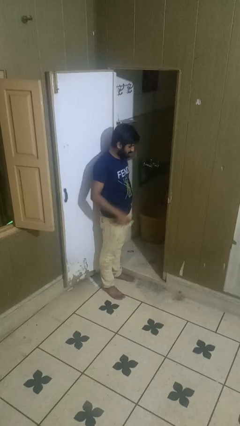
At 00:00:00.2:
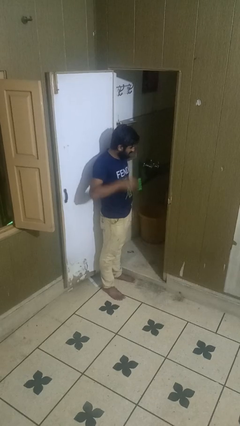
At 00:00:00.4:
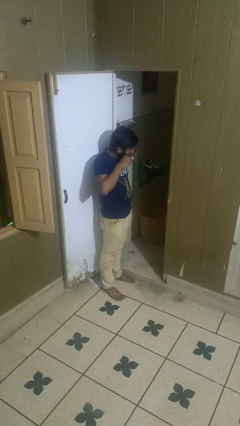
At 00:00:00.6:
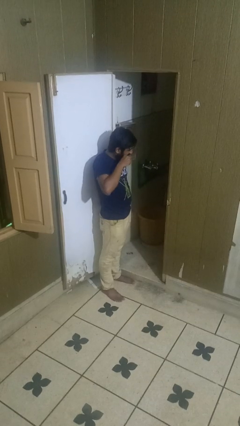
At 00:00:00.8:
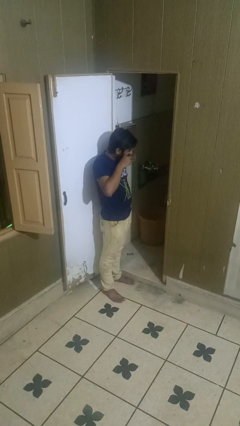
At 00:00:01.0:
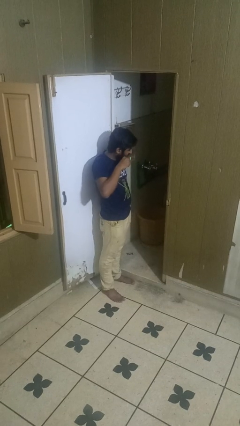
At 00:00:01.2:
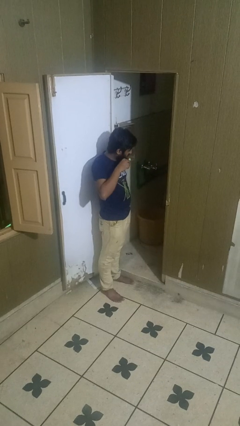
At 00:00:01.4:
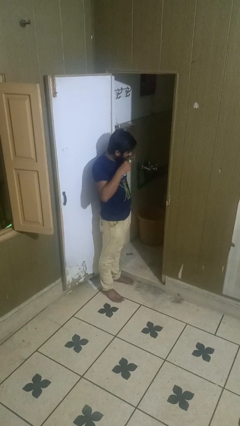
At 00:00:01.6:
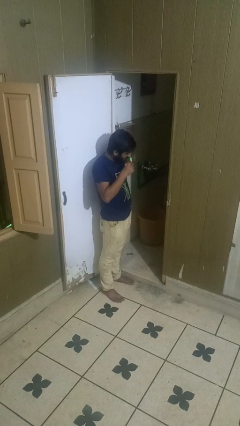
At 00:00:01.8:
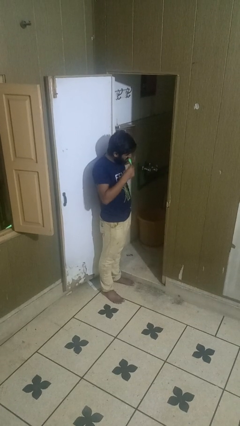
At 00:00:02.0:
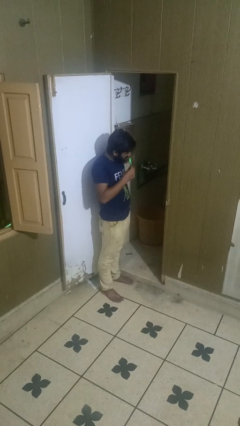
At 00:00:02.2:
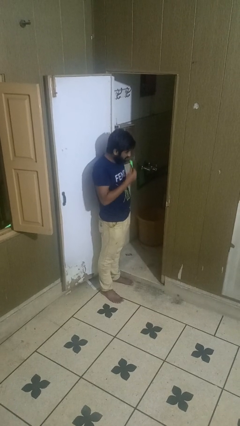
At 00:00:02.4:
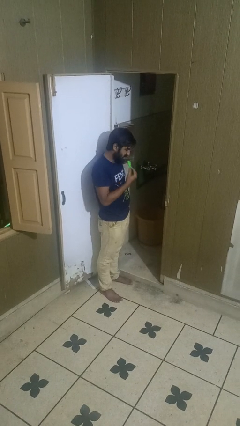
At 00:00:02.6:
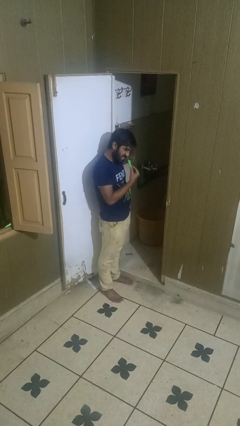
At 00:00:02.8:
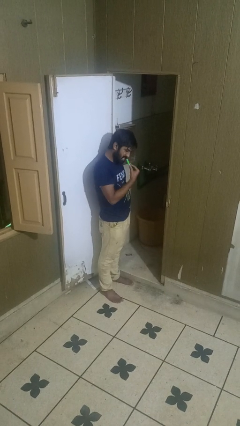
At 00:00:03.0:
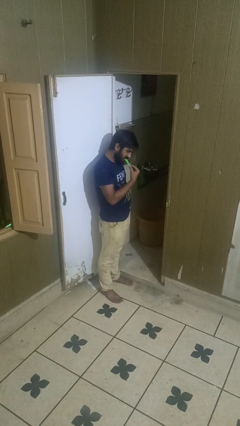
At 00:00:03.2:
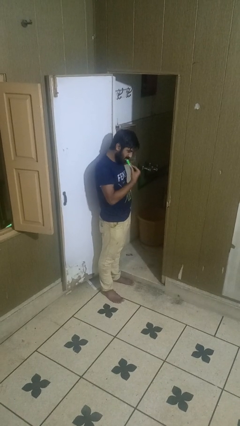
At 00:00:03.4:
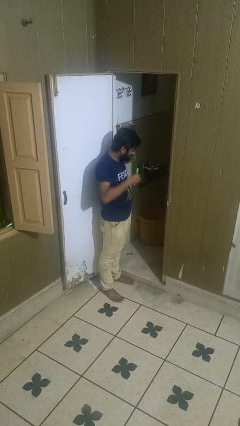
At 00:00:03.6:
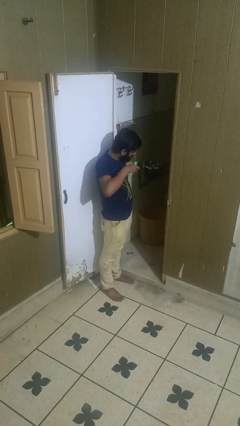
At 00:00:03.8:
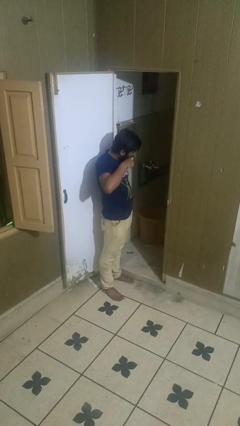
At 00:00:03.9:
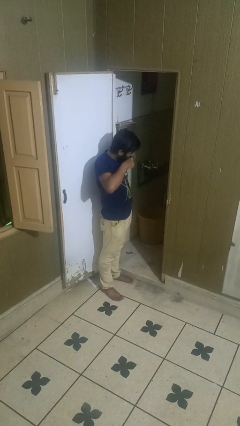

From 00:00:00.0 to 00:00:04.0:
person brushes teeth

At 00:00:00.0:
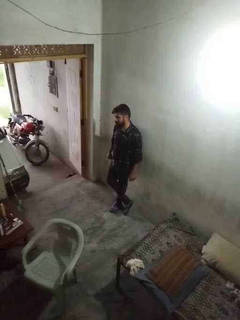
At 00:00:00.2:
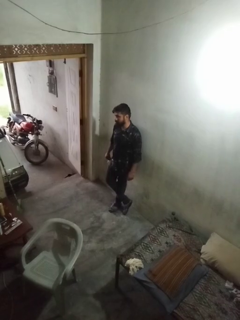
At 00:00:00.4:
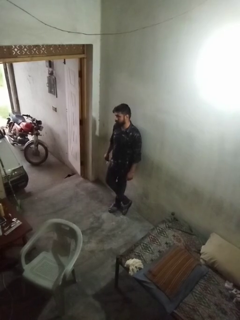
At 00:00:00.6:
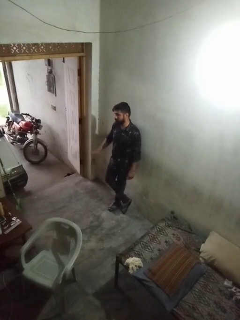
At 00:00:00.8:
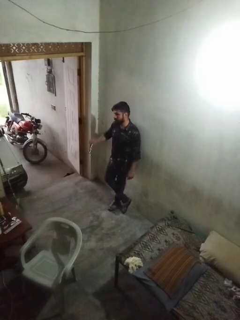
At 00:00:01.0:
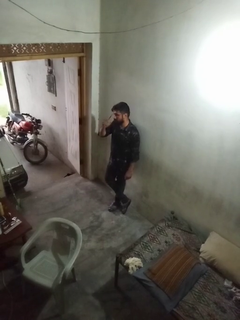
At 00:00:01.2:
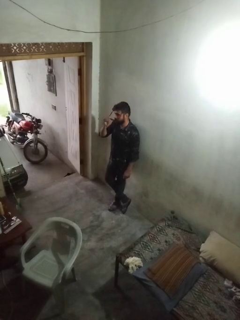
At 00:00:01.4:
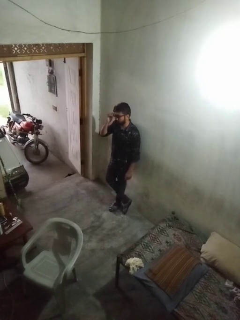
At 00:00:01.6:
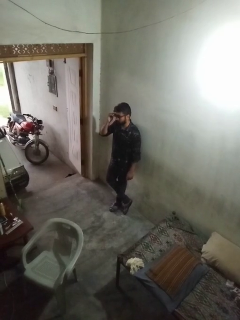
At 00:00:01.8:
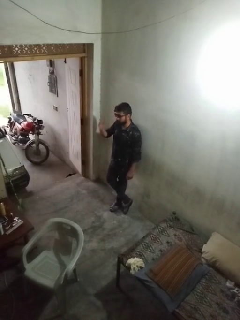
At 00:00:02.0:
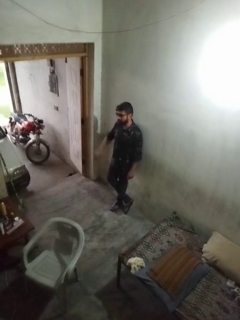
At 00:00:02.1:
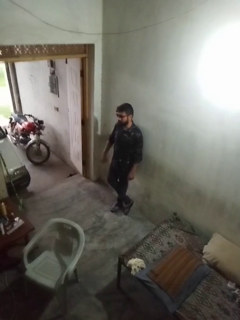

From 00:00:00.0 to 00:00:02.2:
person puts on sunglasses

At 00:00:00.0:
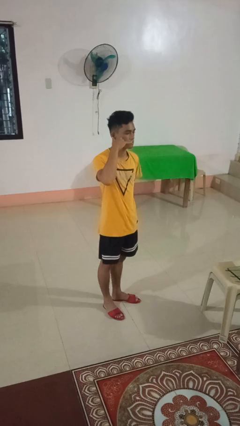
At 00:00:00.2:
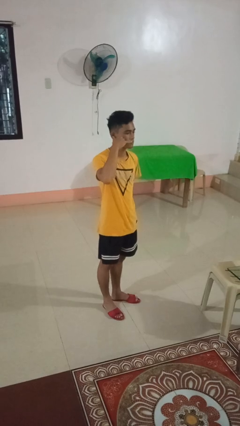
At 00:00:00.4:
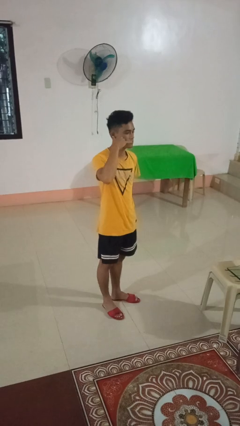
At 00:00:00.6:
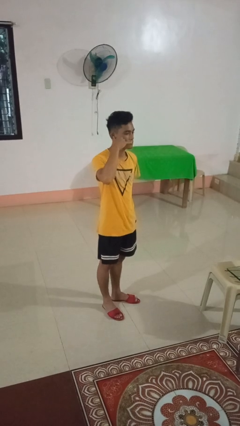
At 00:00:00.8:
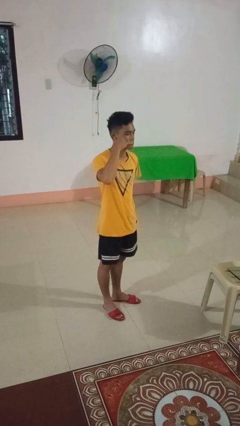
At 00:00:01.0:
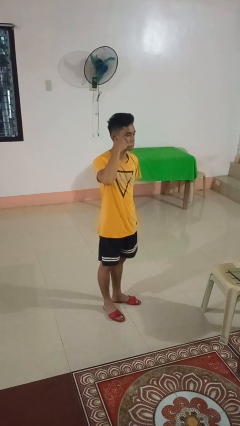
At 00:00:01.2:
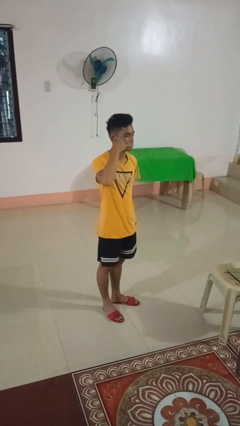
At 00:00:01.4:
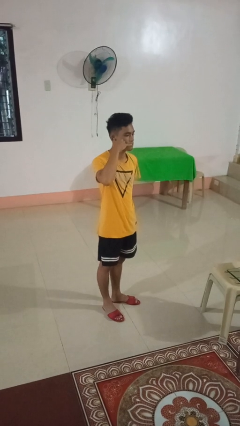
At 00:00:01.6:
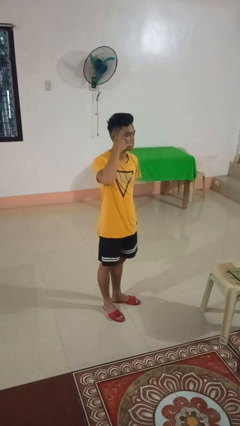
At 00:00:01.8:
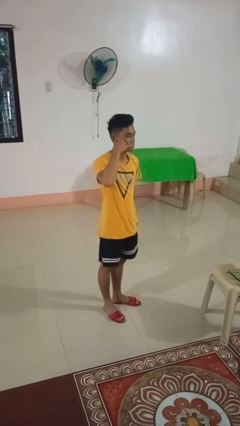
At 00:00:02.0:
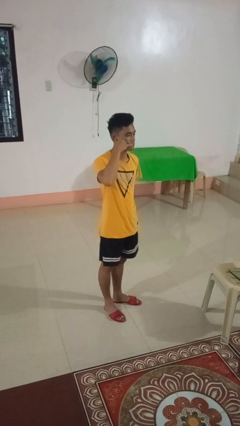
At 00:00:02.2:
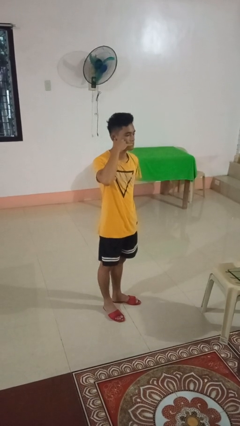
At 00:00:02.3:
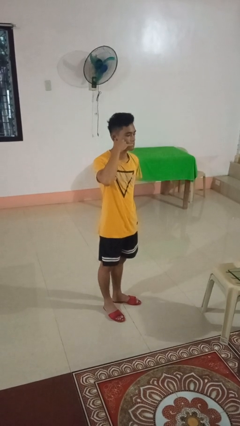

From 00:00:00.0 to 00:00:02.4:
person gestures call me

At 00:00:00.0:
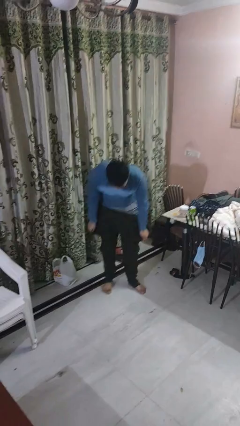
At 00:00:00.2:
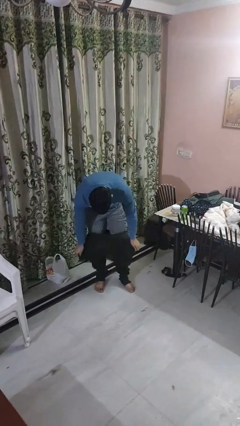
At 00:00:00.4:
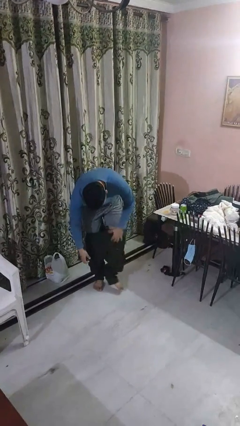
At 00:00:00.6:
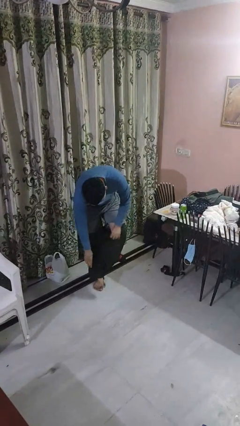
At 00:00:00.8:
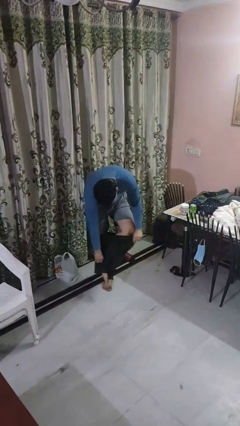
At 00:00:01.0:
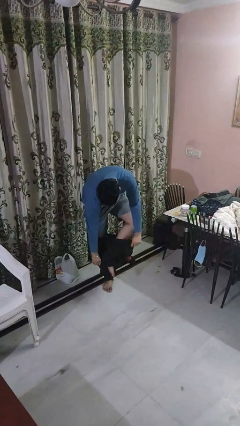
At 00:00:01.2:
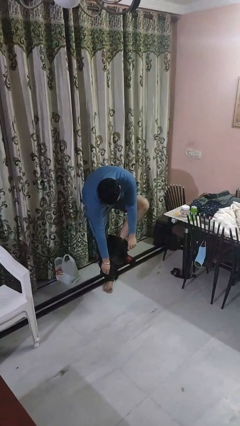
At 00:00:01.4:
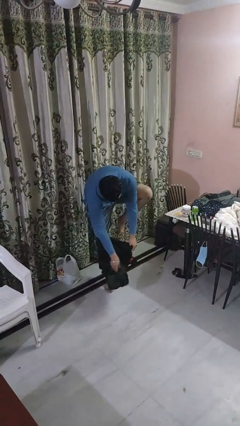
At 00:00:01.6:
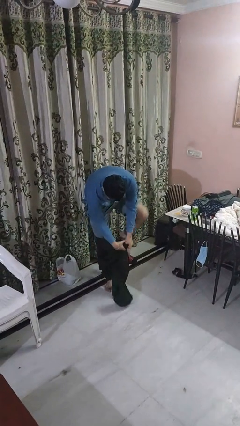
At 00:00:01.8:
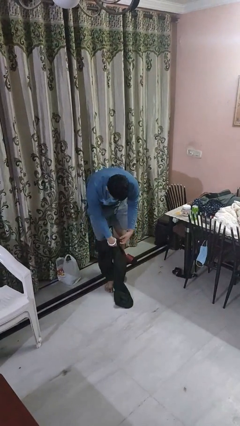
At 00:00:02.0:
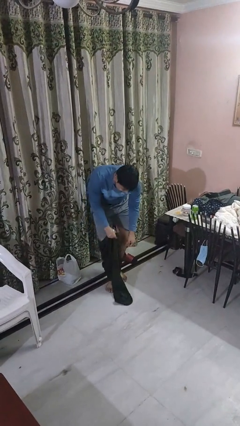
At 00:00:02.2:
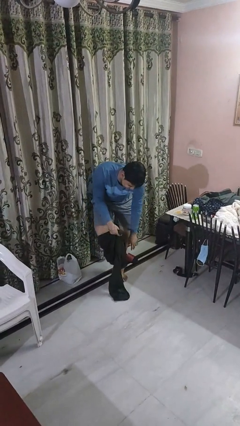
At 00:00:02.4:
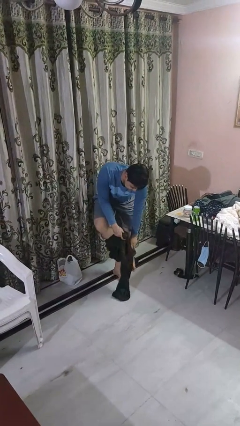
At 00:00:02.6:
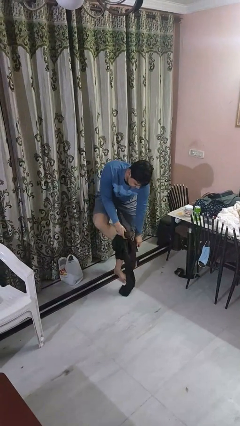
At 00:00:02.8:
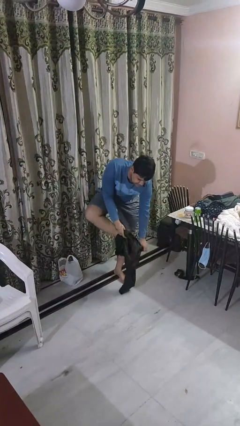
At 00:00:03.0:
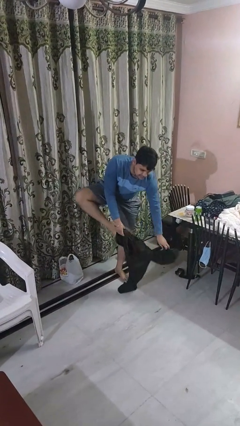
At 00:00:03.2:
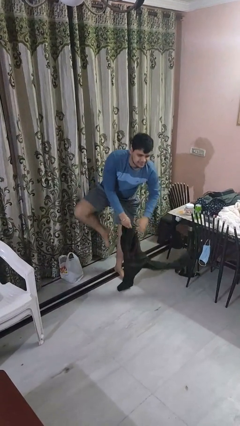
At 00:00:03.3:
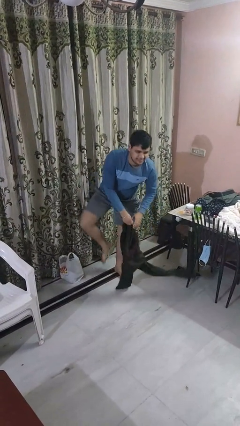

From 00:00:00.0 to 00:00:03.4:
person takes off pants

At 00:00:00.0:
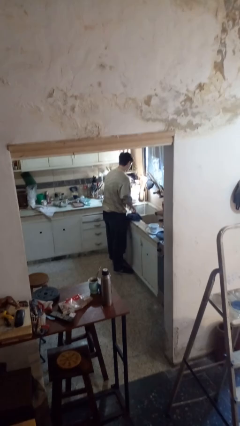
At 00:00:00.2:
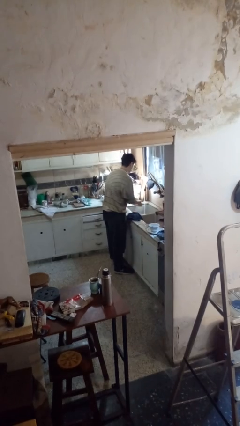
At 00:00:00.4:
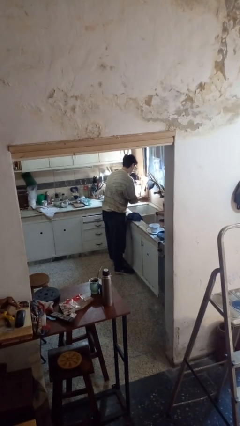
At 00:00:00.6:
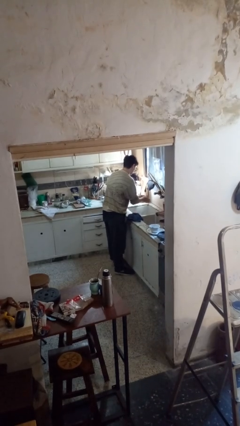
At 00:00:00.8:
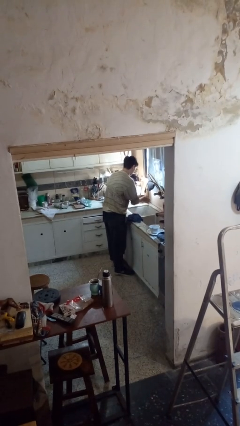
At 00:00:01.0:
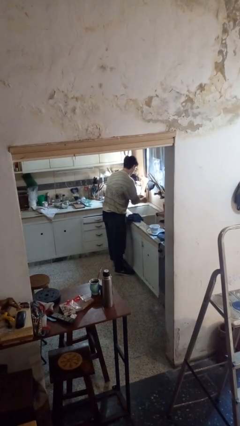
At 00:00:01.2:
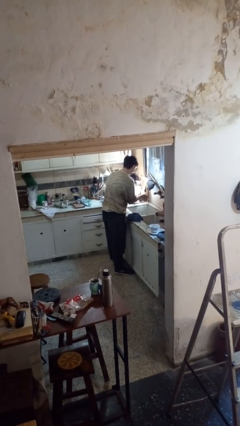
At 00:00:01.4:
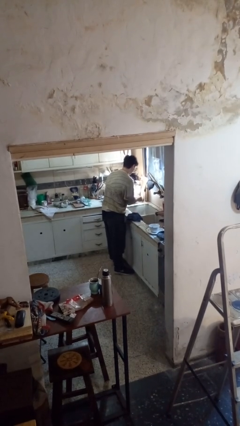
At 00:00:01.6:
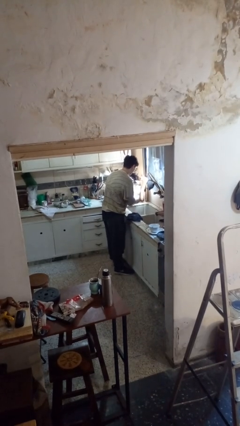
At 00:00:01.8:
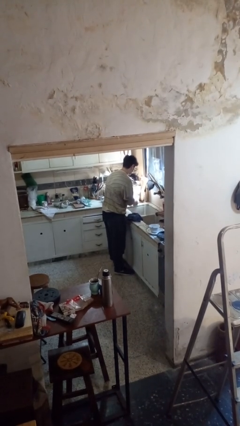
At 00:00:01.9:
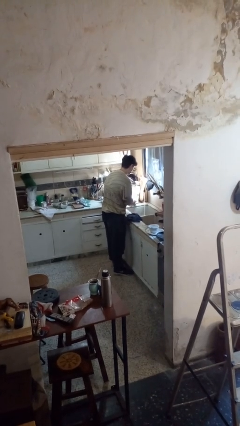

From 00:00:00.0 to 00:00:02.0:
person washes hands

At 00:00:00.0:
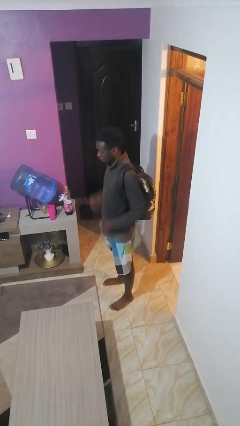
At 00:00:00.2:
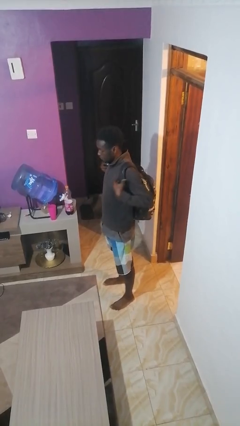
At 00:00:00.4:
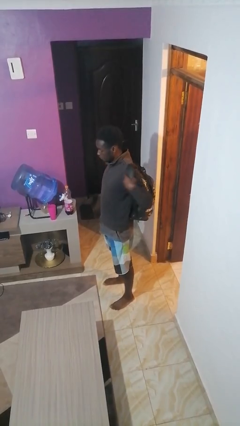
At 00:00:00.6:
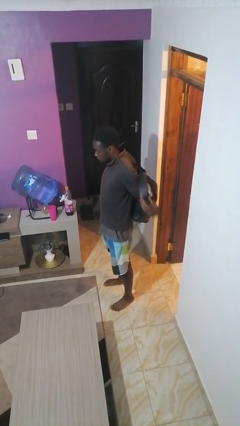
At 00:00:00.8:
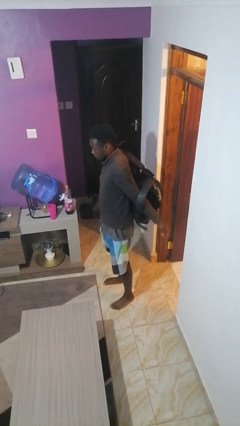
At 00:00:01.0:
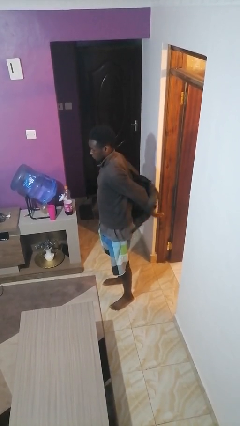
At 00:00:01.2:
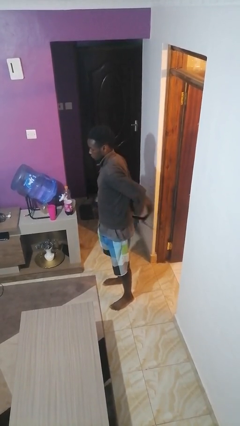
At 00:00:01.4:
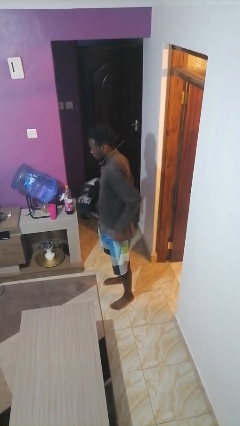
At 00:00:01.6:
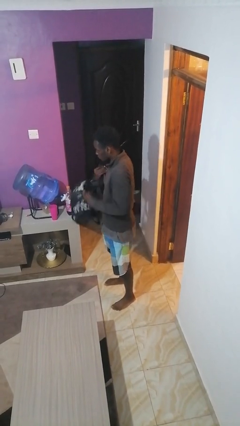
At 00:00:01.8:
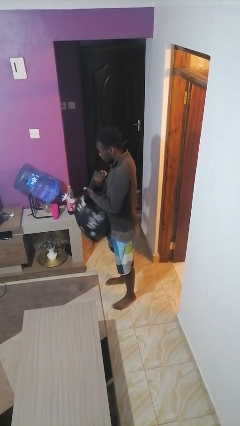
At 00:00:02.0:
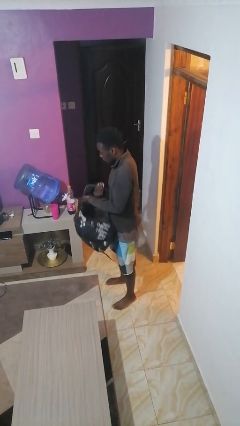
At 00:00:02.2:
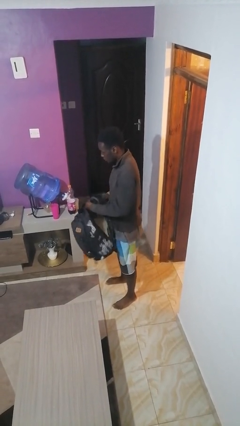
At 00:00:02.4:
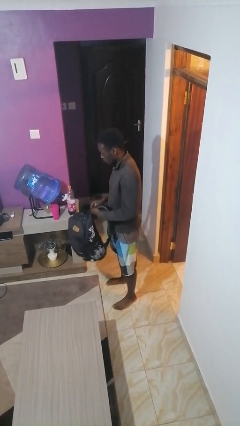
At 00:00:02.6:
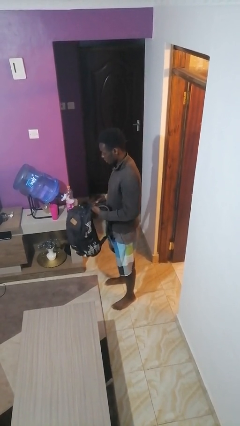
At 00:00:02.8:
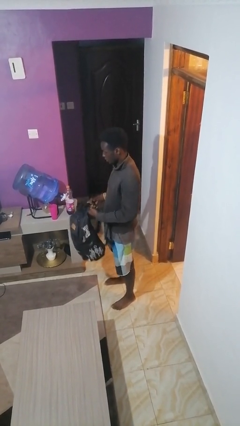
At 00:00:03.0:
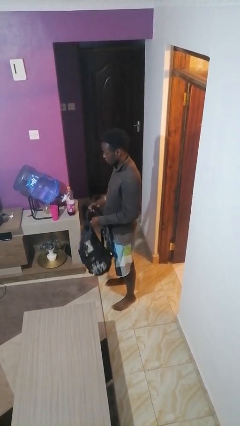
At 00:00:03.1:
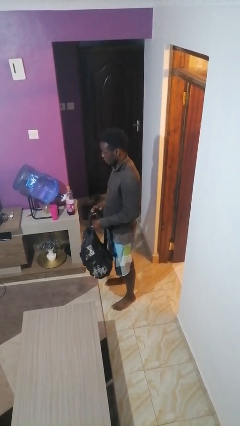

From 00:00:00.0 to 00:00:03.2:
person takes off backpack

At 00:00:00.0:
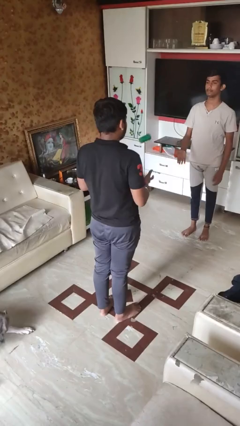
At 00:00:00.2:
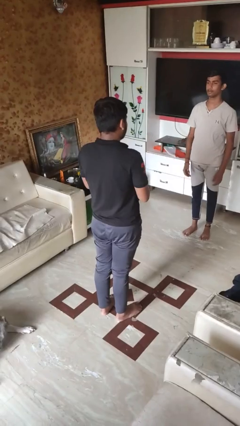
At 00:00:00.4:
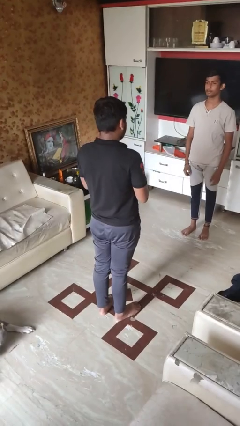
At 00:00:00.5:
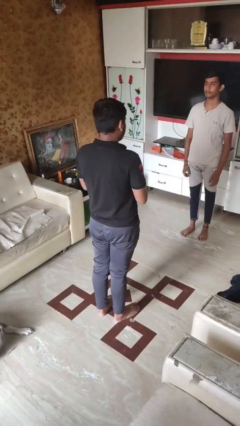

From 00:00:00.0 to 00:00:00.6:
person catches object from person
